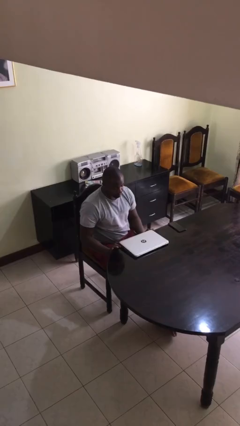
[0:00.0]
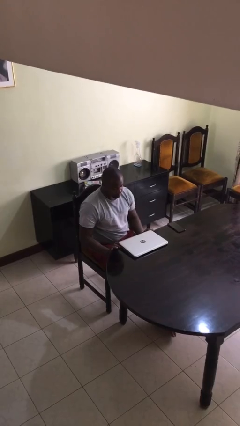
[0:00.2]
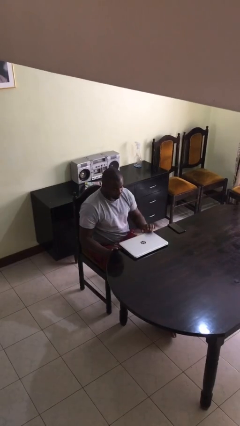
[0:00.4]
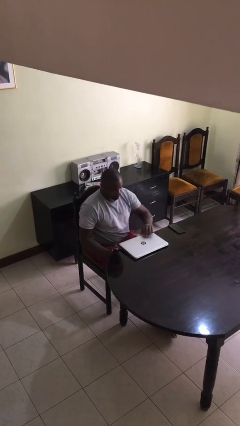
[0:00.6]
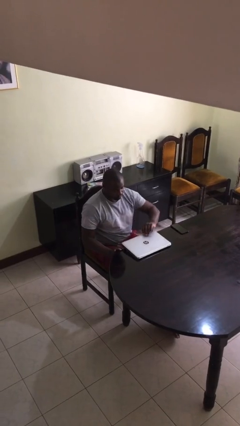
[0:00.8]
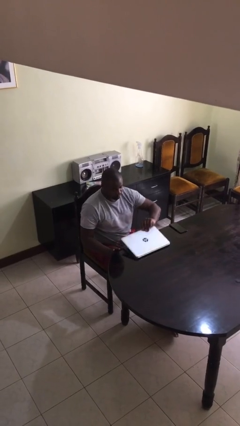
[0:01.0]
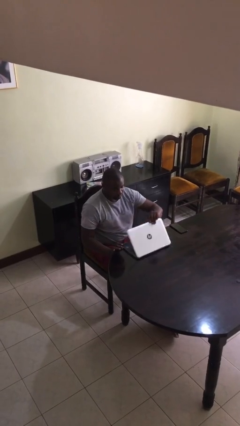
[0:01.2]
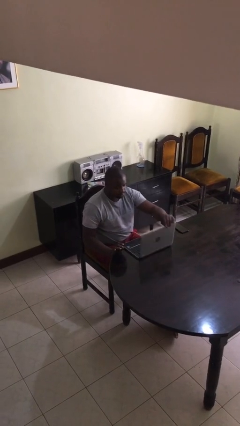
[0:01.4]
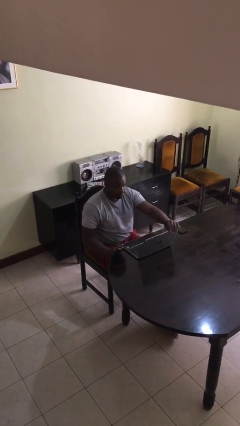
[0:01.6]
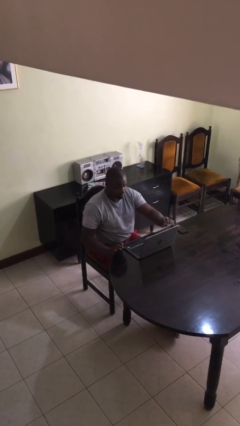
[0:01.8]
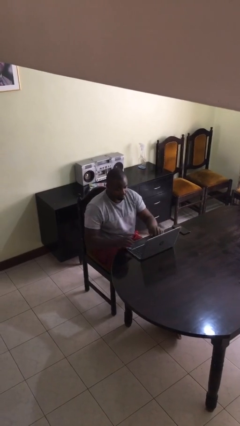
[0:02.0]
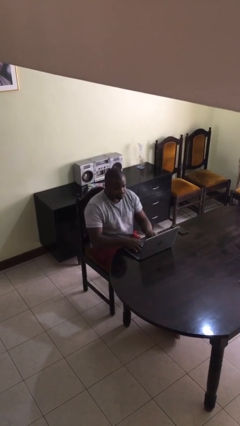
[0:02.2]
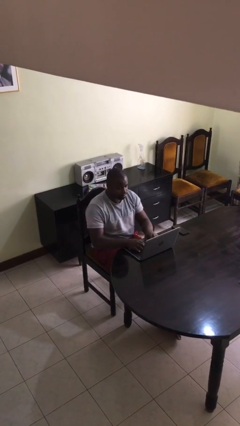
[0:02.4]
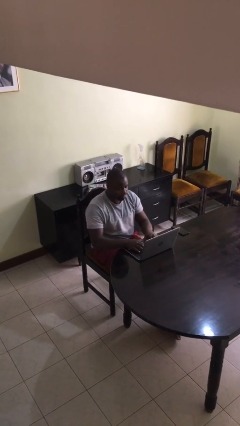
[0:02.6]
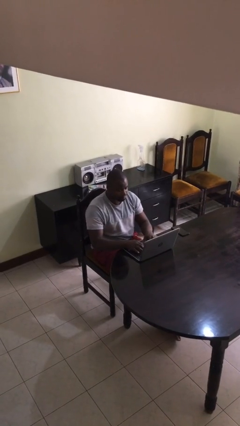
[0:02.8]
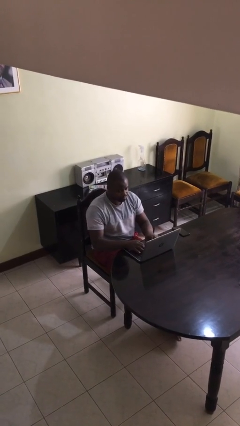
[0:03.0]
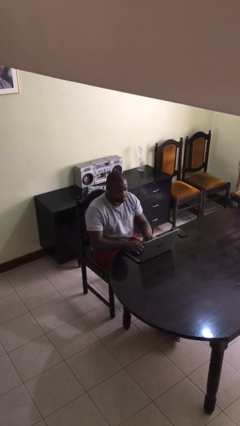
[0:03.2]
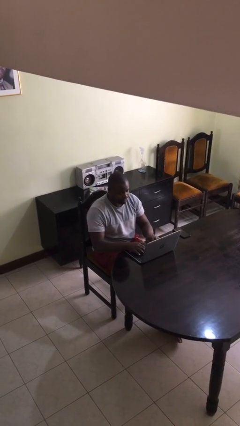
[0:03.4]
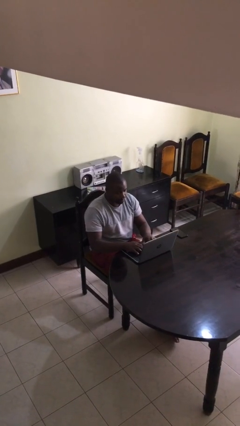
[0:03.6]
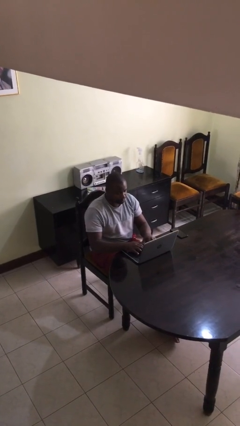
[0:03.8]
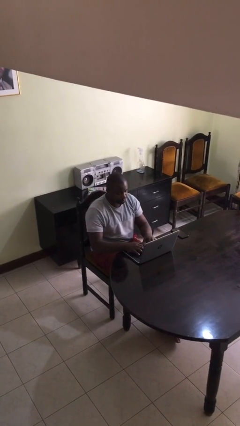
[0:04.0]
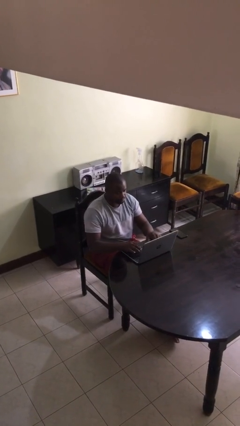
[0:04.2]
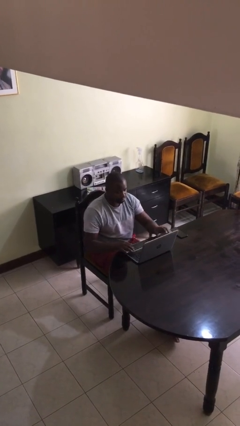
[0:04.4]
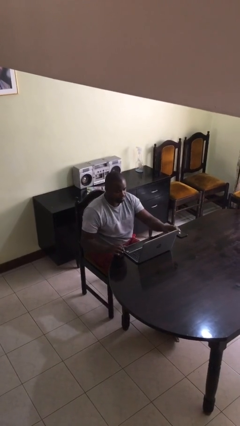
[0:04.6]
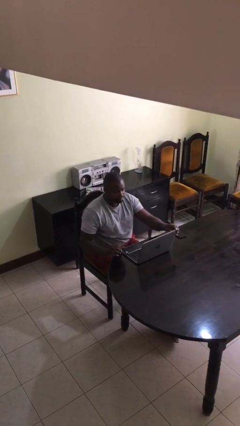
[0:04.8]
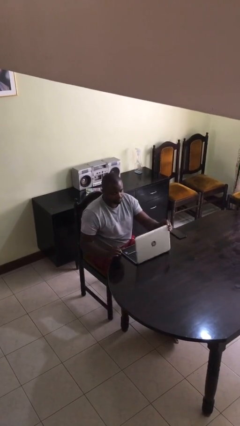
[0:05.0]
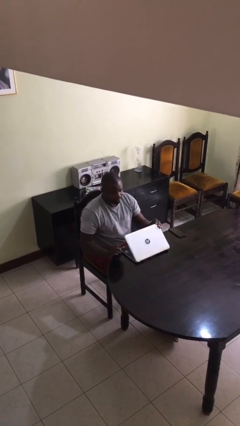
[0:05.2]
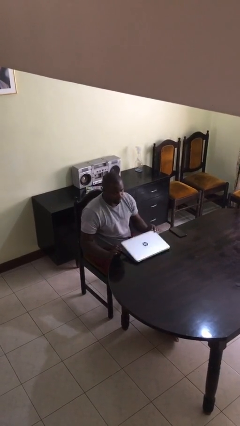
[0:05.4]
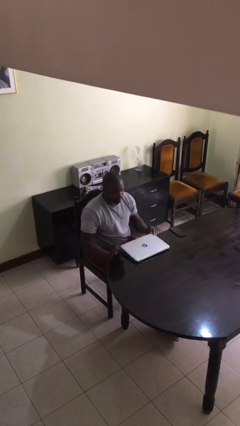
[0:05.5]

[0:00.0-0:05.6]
person interacts with laptop

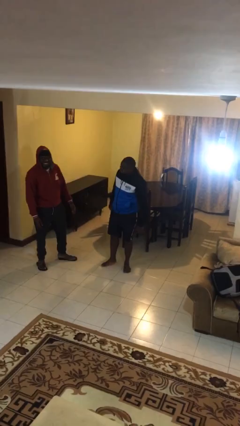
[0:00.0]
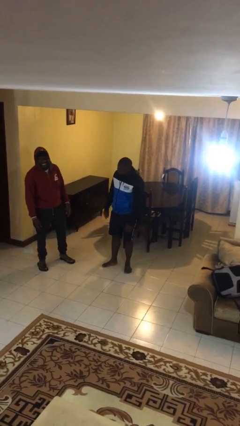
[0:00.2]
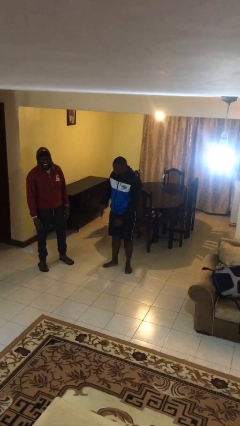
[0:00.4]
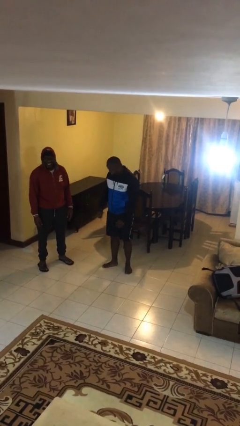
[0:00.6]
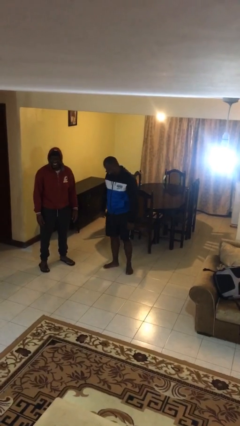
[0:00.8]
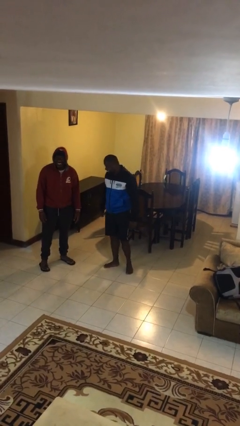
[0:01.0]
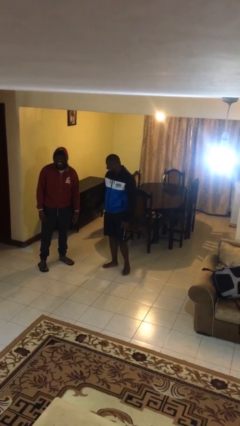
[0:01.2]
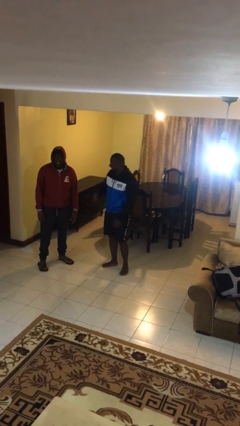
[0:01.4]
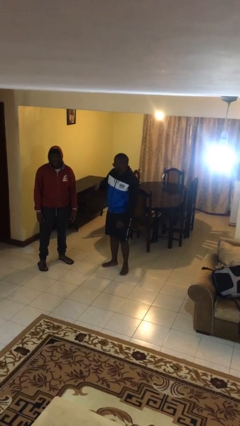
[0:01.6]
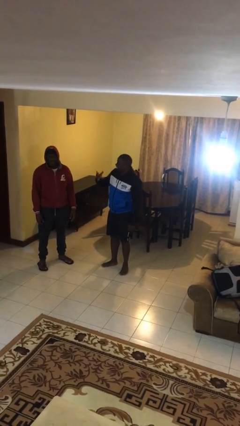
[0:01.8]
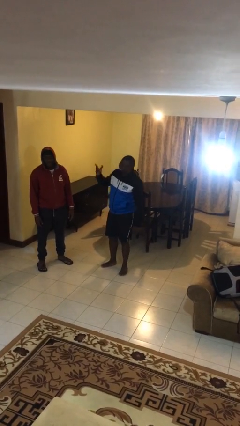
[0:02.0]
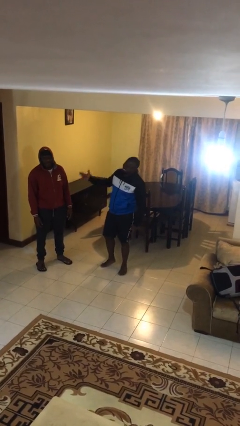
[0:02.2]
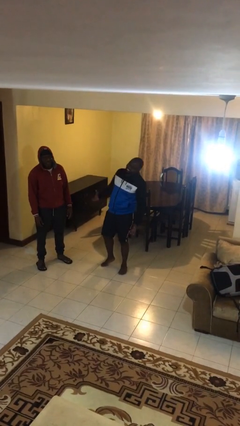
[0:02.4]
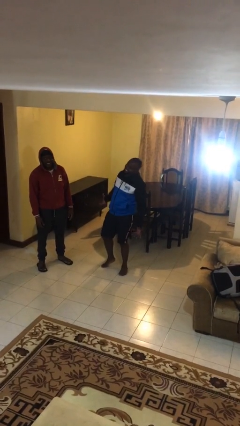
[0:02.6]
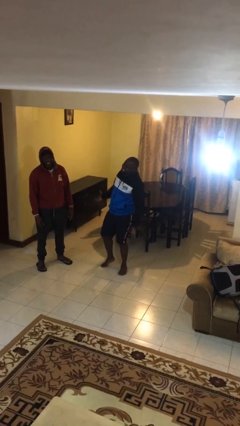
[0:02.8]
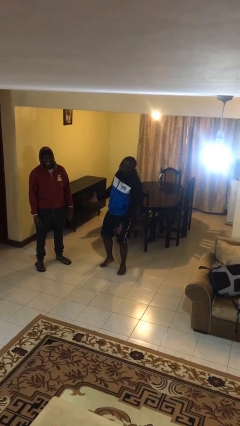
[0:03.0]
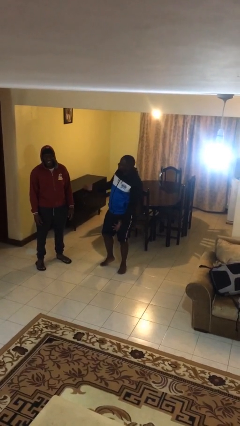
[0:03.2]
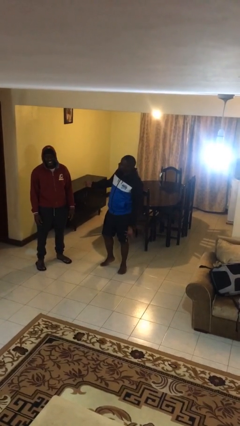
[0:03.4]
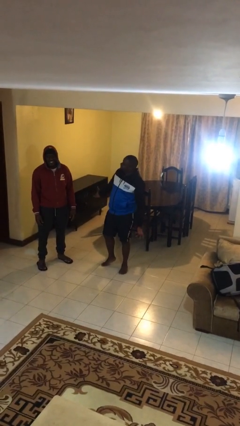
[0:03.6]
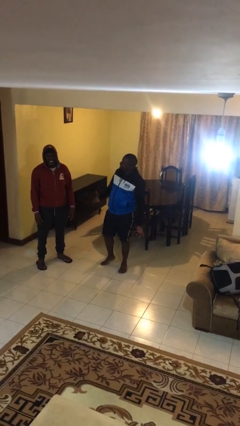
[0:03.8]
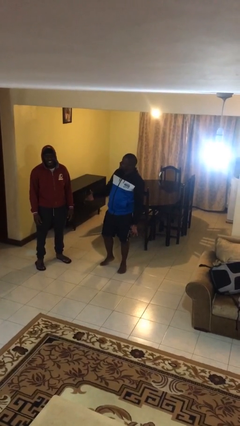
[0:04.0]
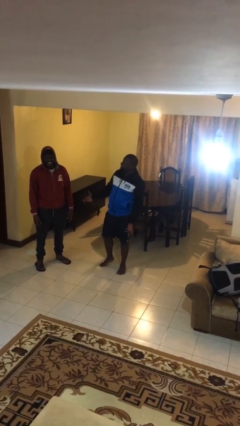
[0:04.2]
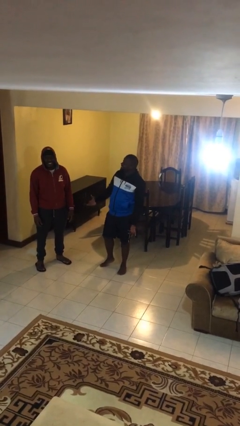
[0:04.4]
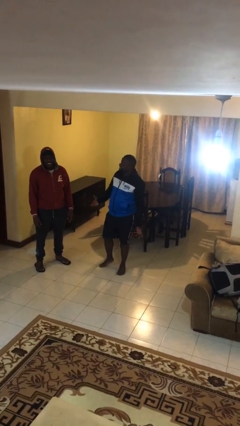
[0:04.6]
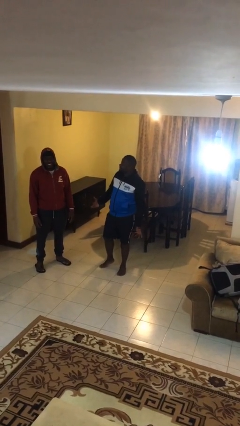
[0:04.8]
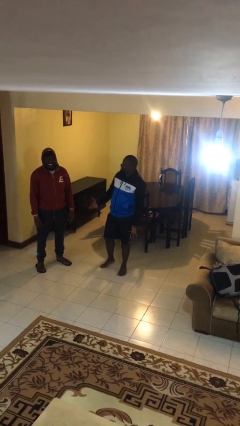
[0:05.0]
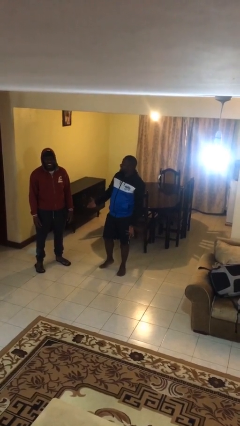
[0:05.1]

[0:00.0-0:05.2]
person talks to person

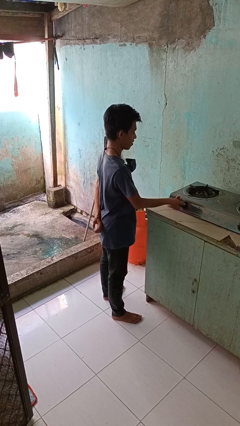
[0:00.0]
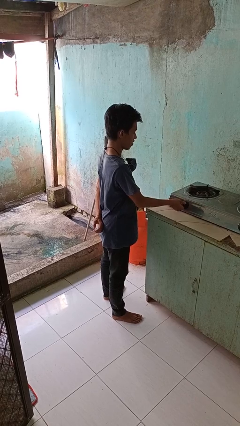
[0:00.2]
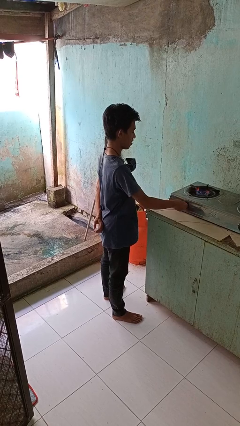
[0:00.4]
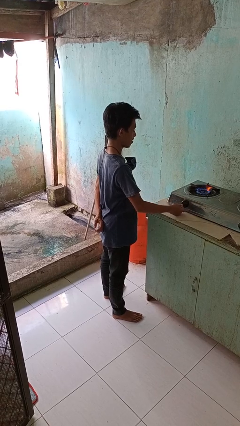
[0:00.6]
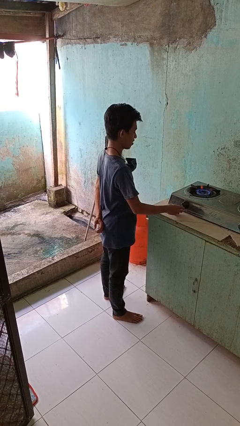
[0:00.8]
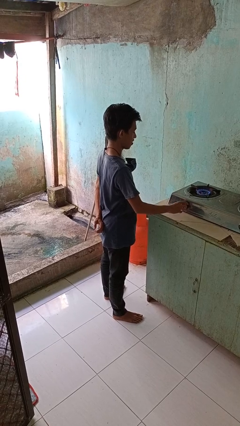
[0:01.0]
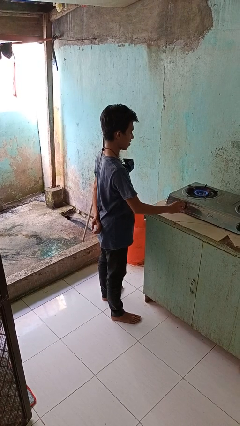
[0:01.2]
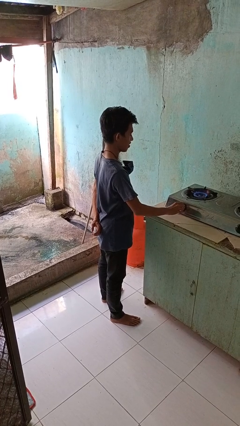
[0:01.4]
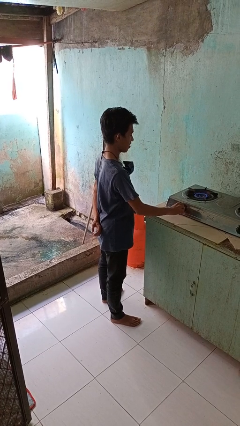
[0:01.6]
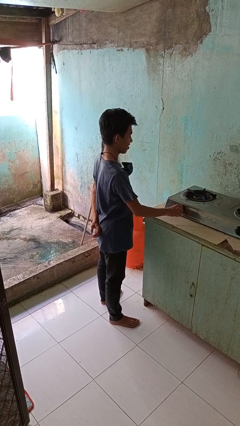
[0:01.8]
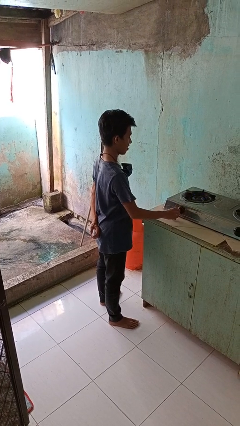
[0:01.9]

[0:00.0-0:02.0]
person turns on stovetop

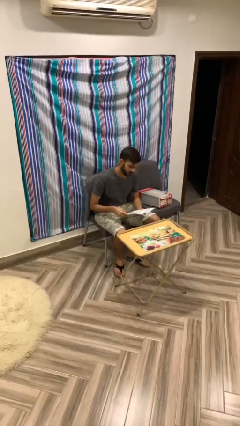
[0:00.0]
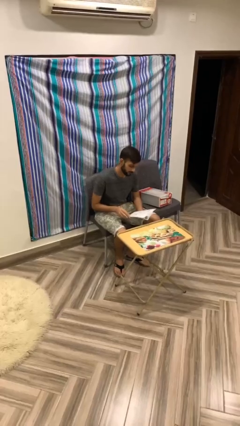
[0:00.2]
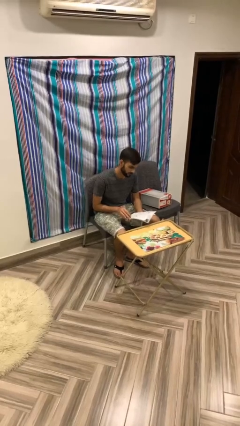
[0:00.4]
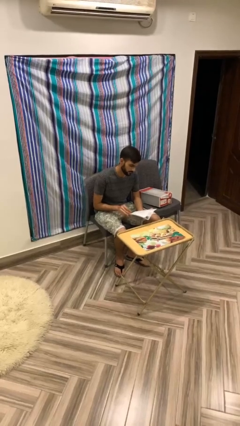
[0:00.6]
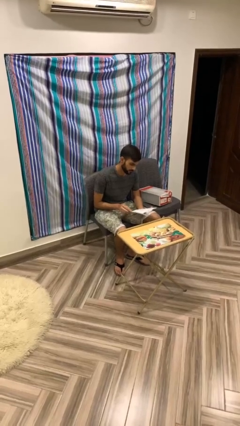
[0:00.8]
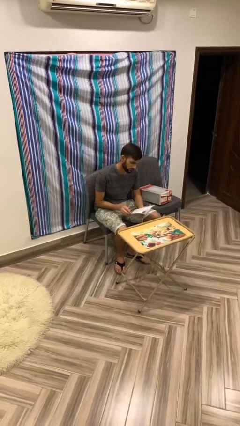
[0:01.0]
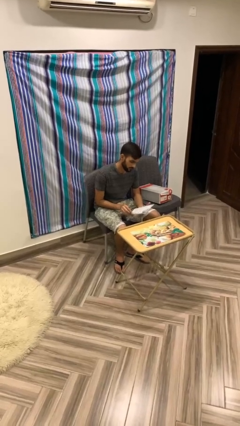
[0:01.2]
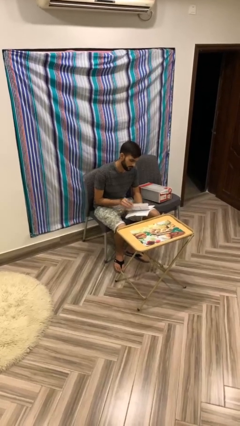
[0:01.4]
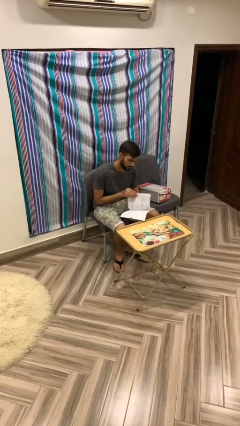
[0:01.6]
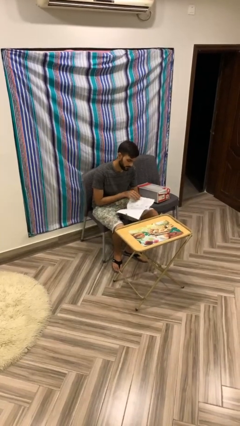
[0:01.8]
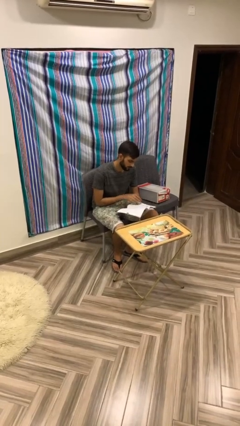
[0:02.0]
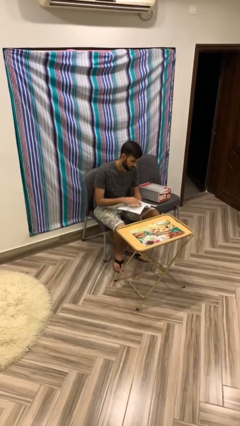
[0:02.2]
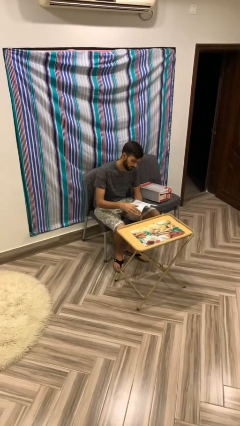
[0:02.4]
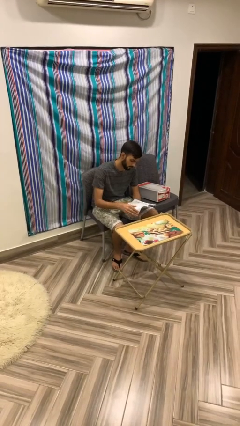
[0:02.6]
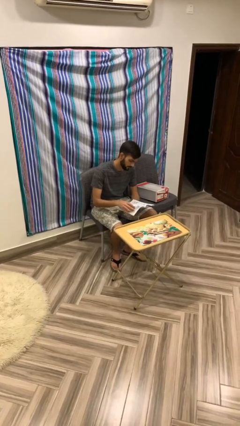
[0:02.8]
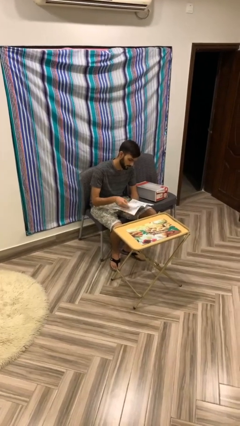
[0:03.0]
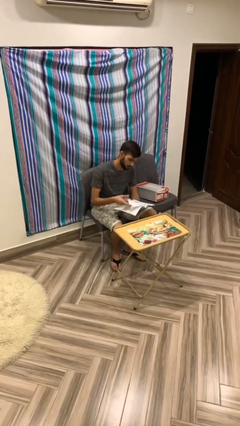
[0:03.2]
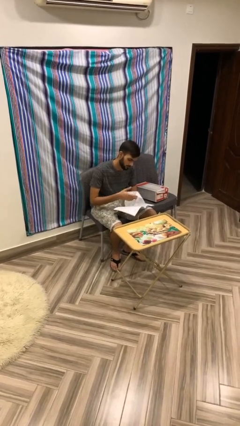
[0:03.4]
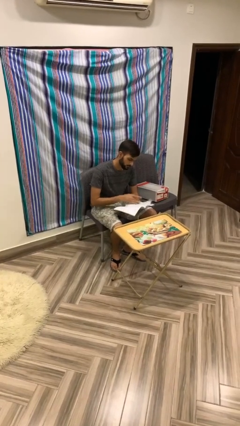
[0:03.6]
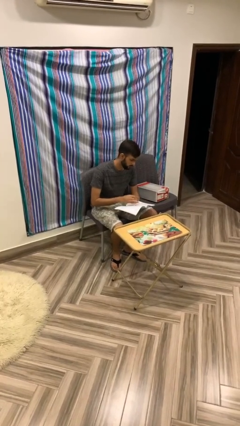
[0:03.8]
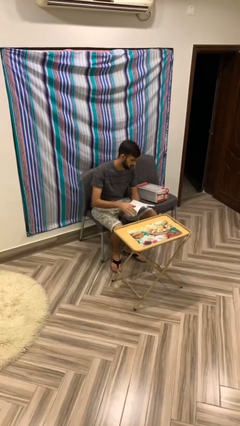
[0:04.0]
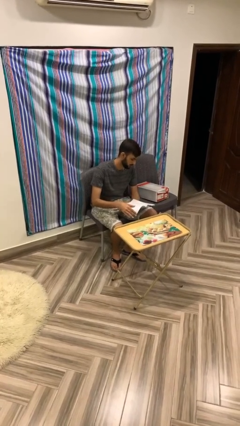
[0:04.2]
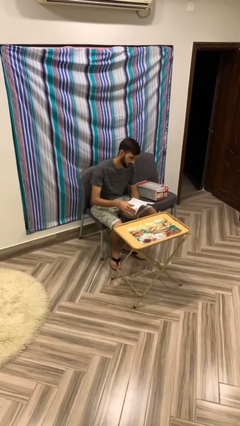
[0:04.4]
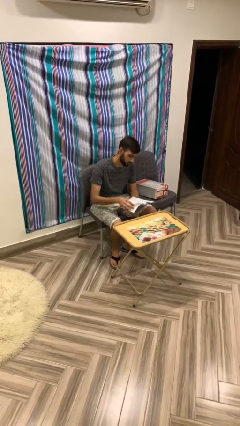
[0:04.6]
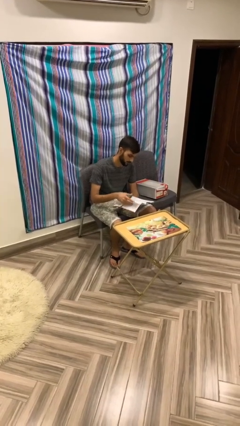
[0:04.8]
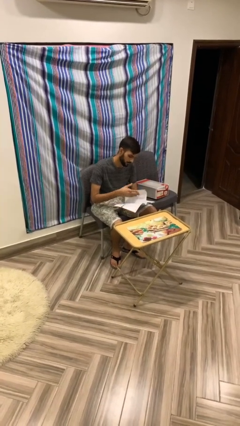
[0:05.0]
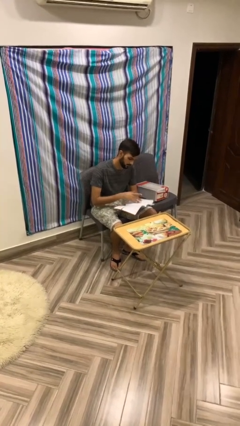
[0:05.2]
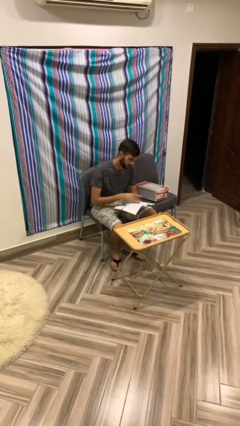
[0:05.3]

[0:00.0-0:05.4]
person reads document
